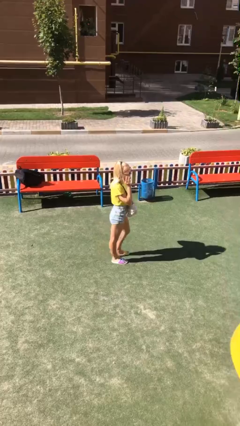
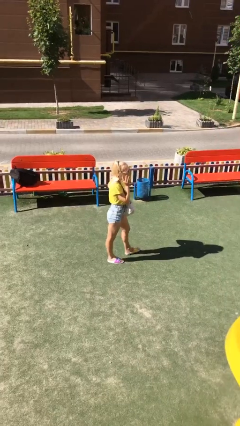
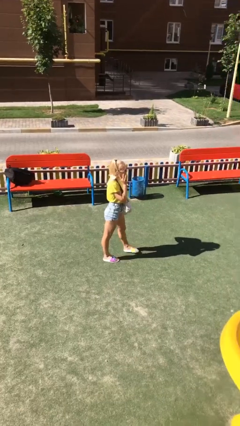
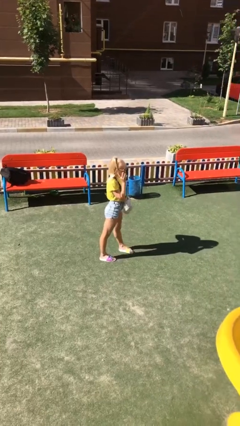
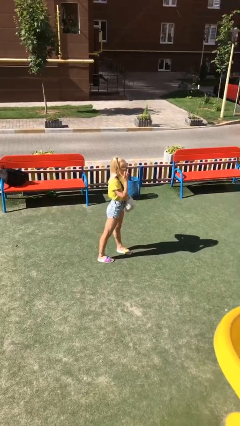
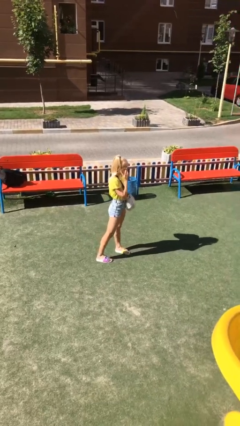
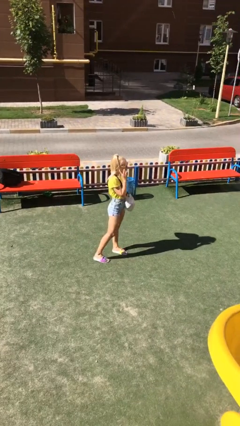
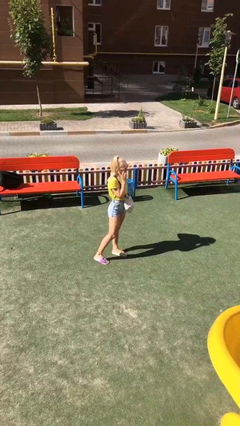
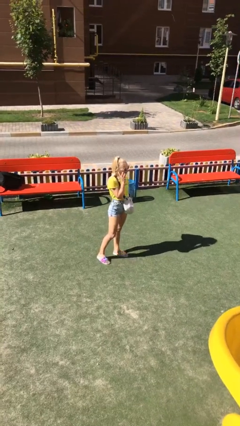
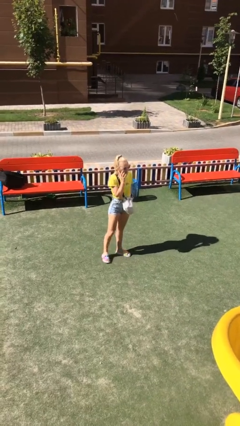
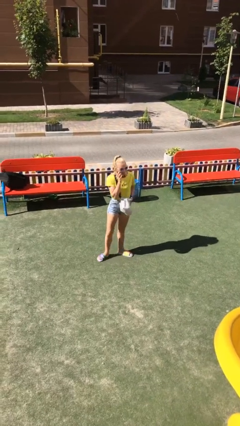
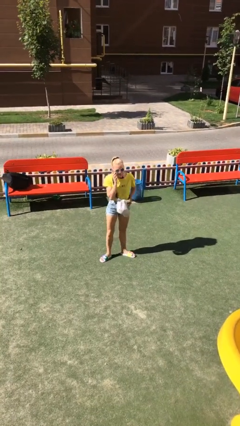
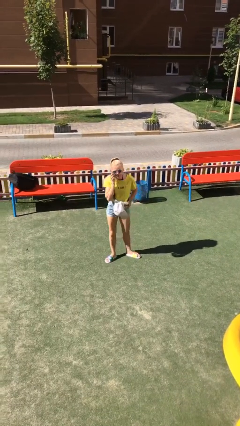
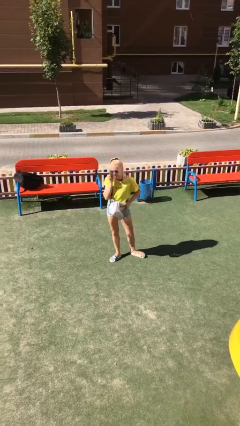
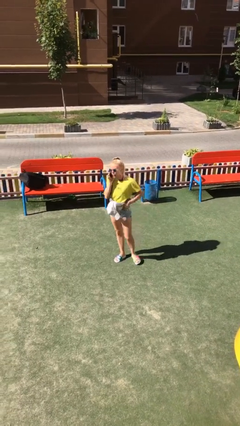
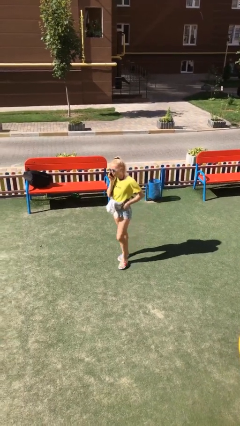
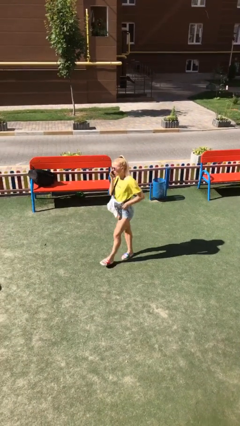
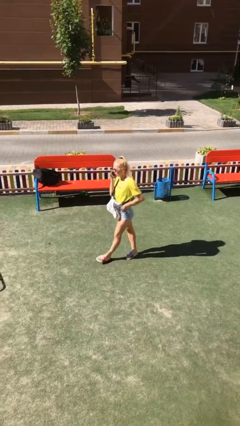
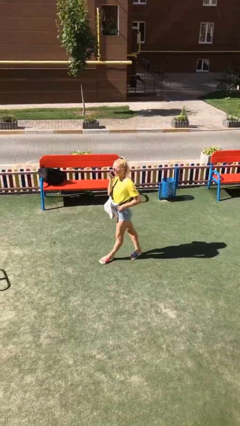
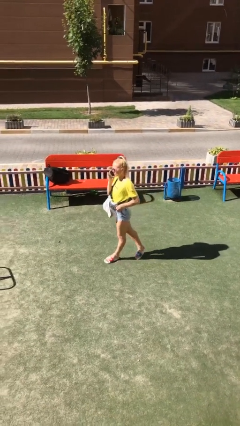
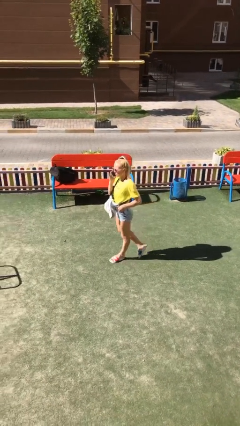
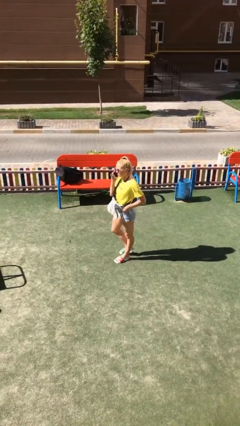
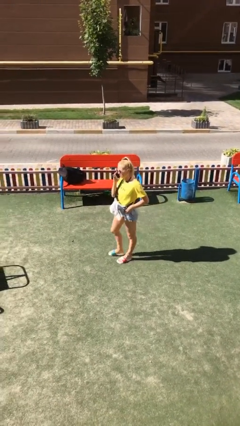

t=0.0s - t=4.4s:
person talks on phone

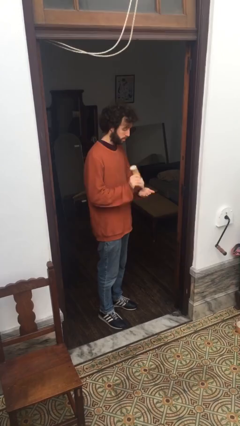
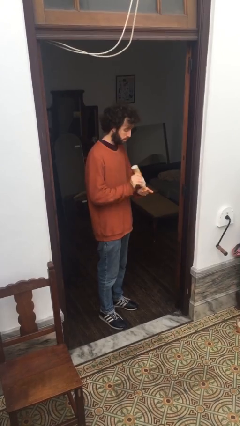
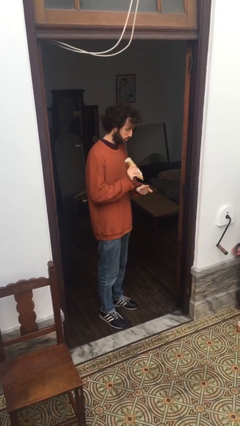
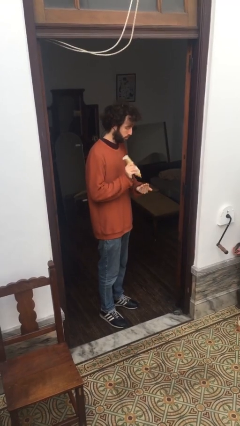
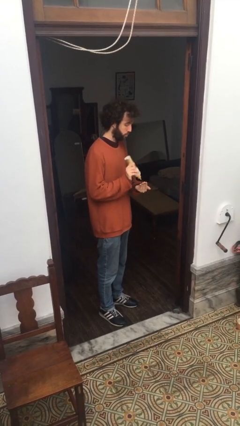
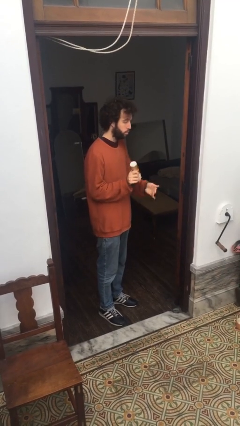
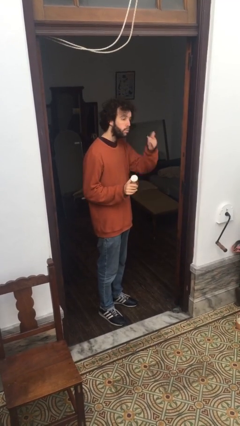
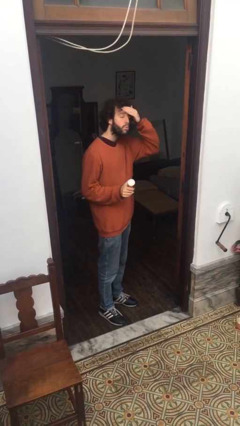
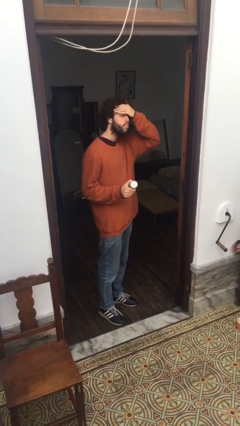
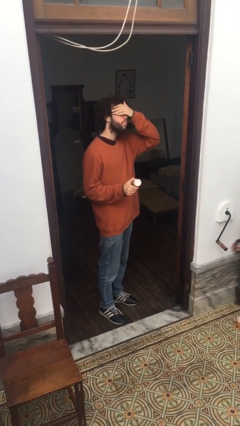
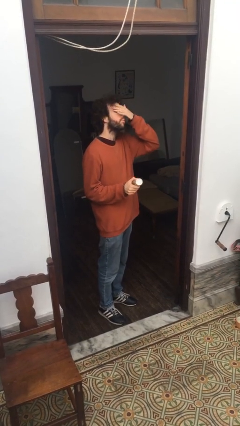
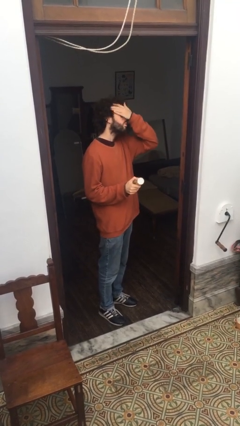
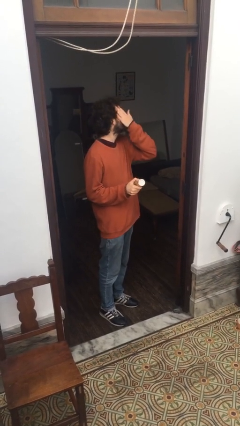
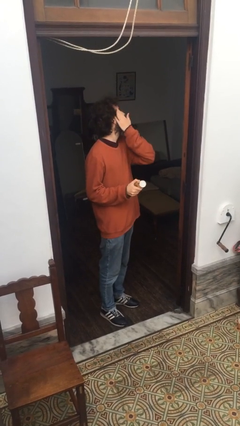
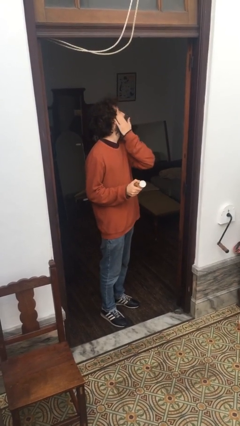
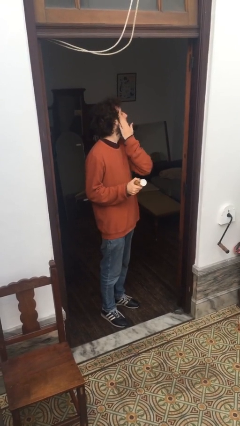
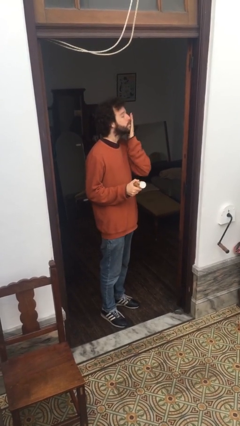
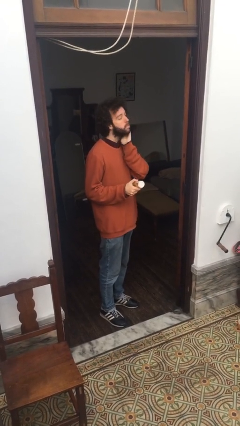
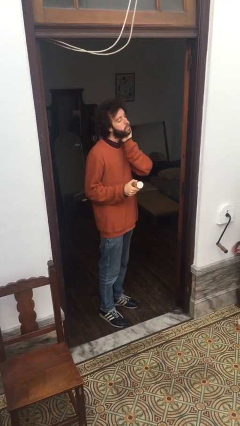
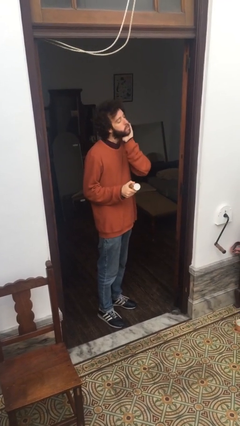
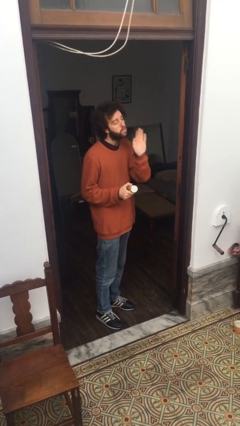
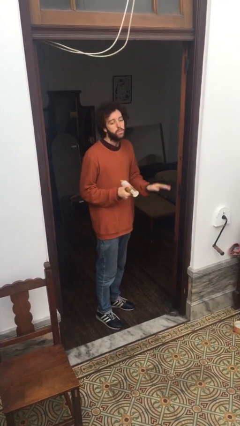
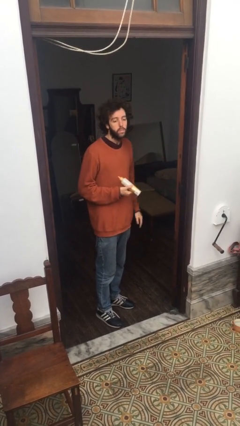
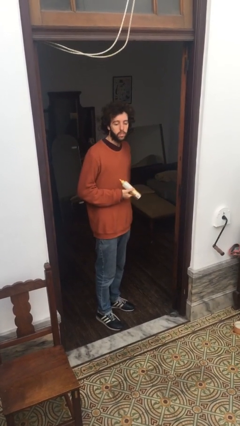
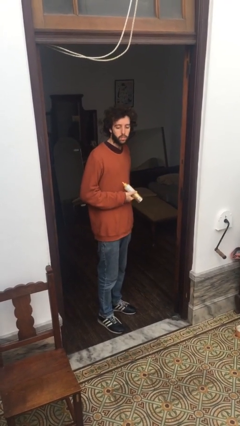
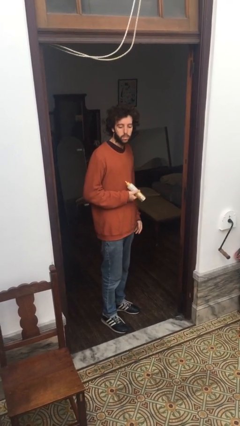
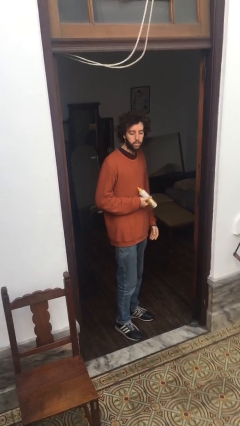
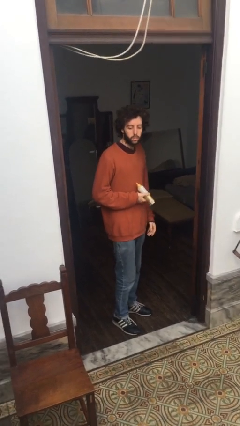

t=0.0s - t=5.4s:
person applies facial moisturizer

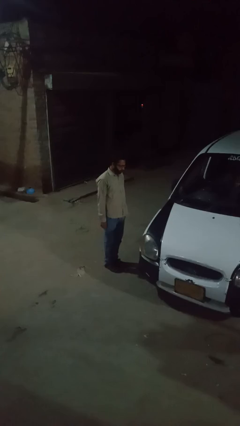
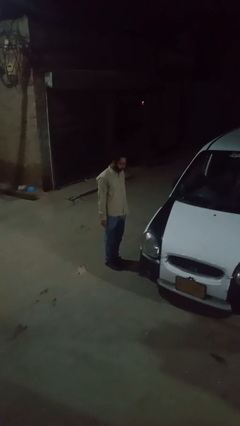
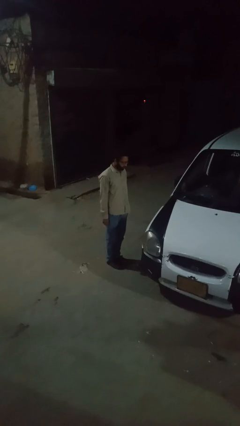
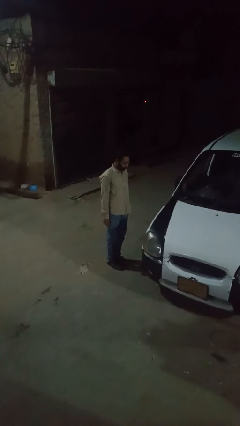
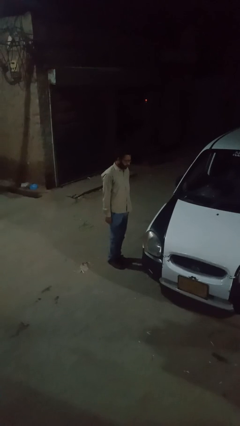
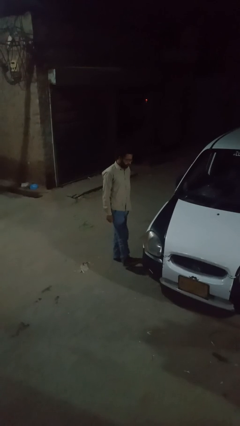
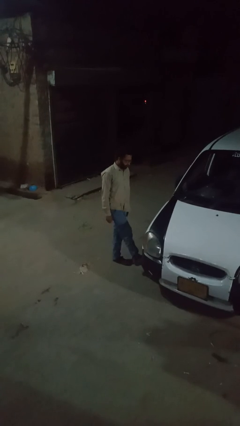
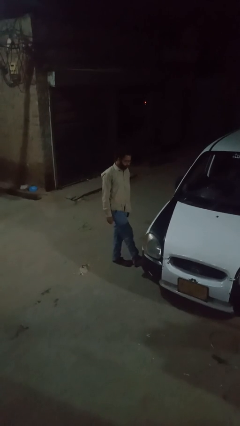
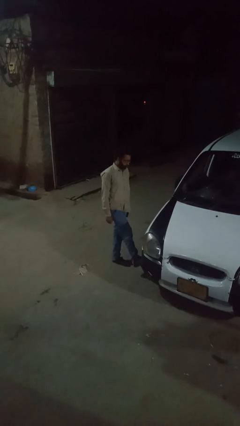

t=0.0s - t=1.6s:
person kicks car tires

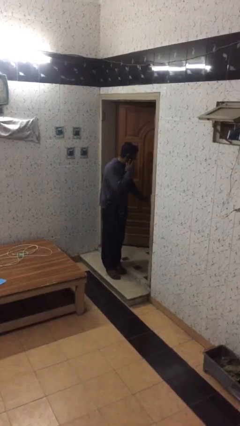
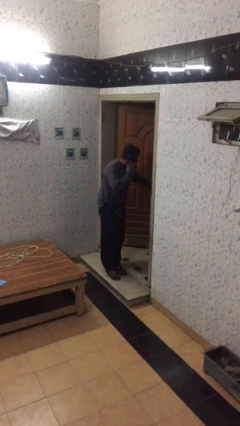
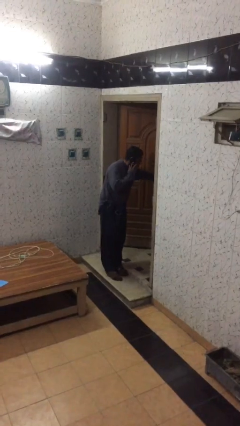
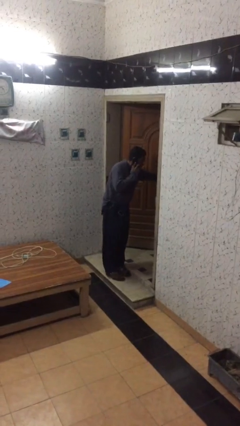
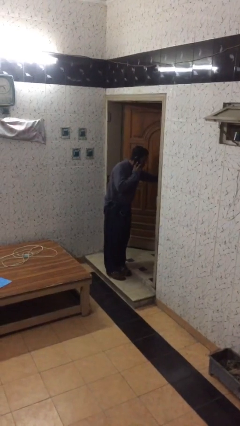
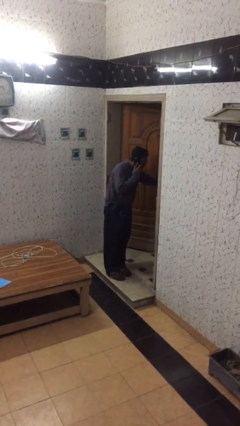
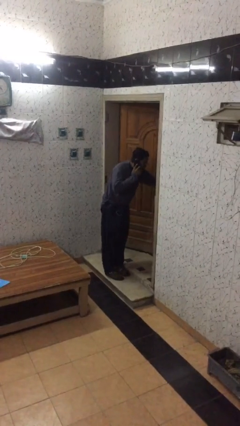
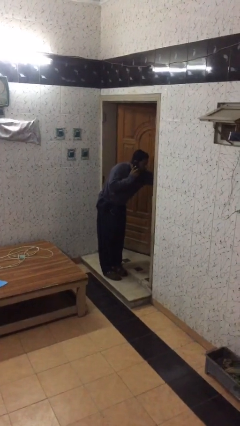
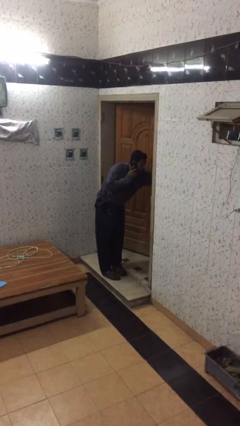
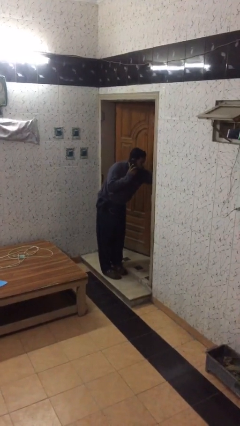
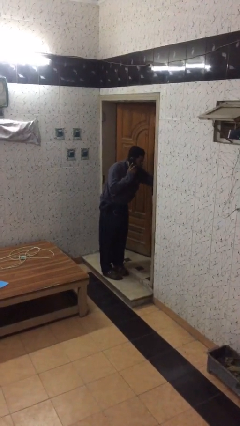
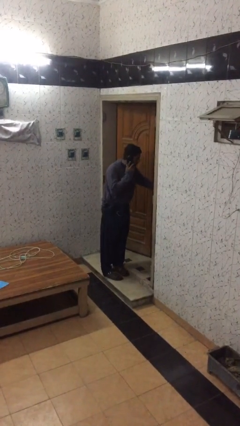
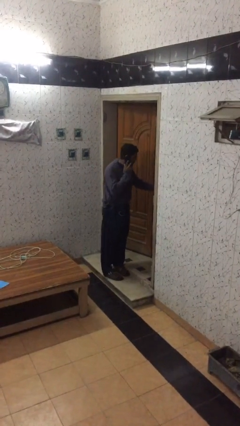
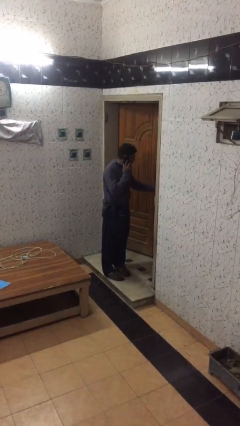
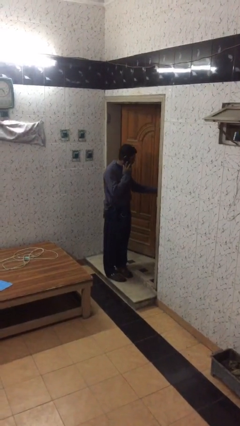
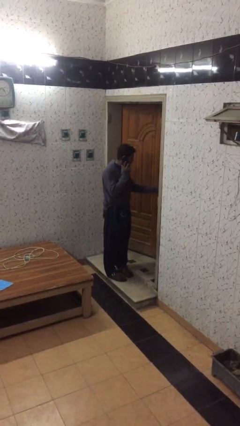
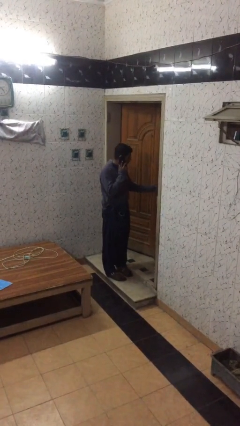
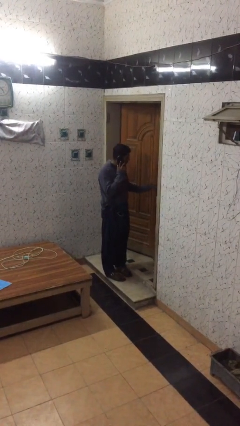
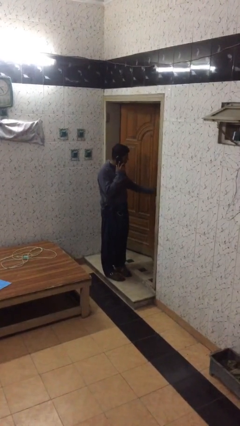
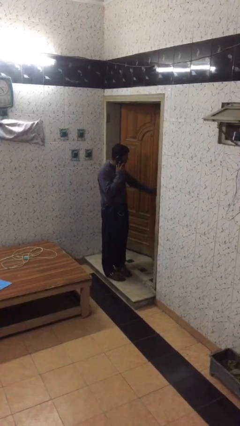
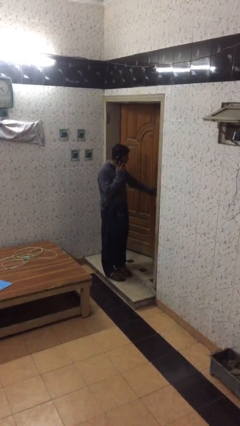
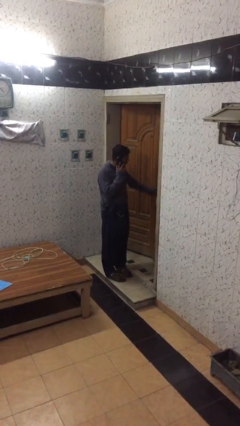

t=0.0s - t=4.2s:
person closes facility door

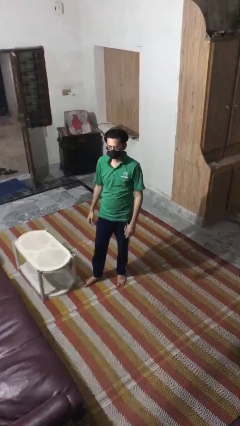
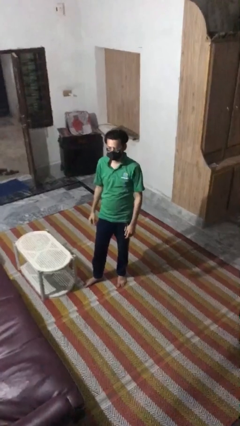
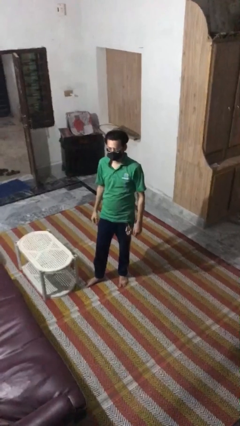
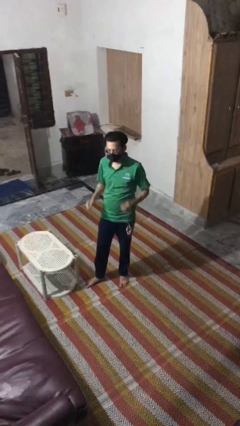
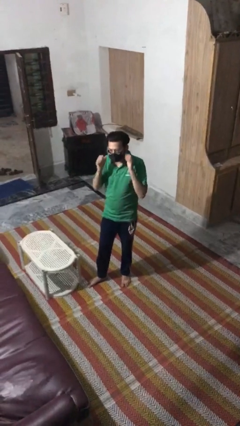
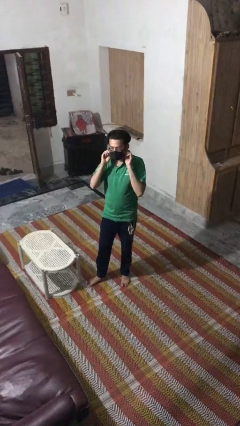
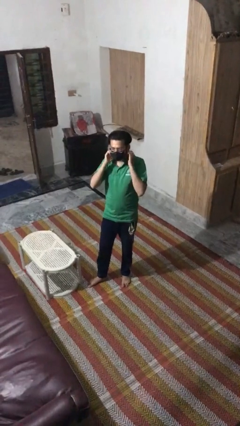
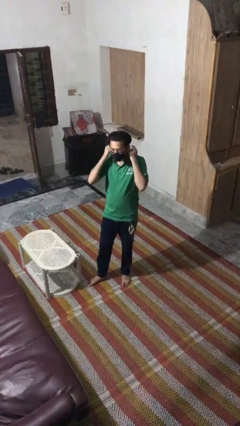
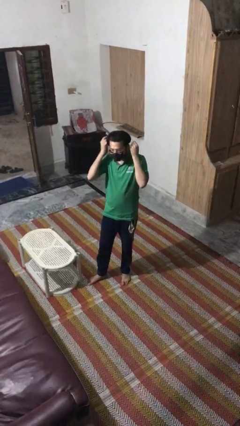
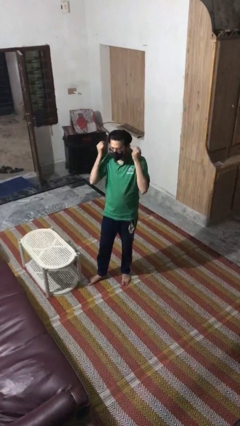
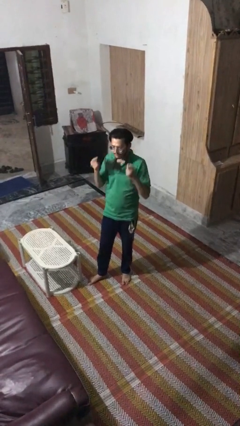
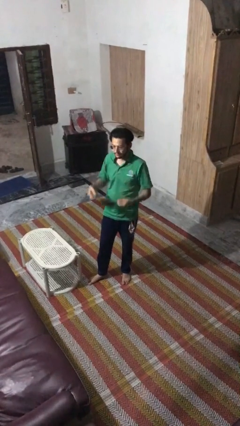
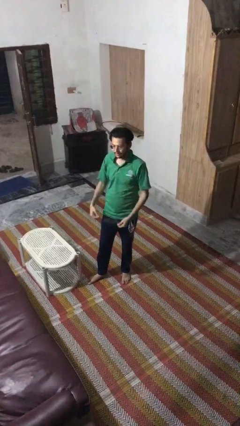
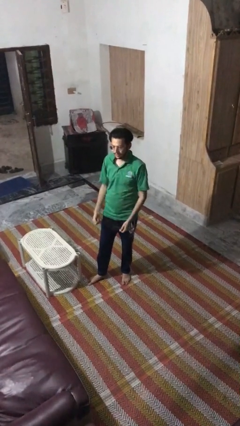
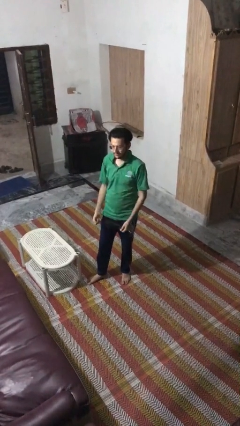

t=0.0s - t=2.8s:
person takes off facemask
